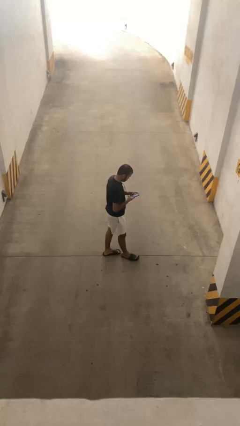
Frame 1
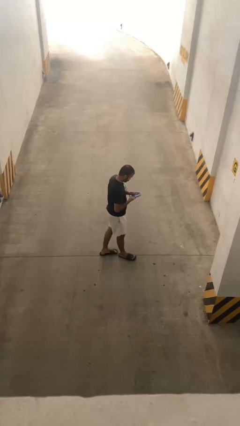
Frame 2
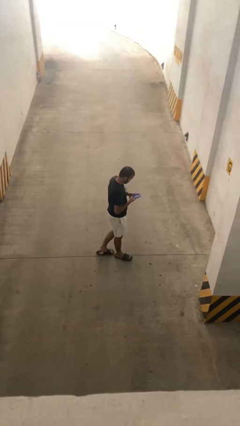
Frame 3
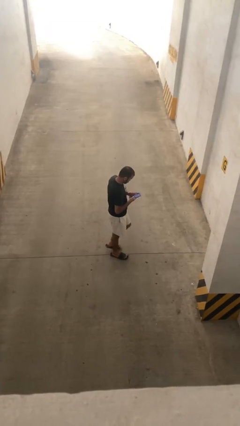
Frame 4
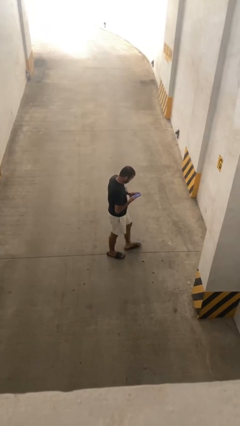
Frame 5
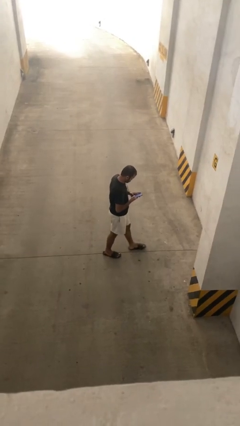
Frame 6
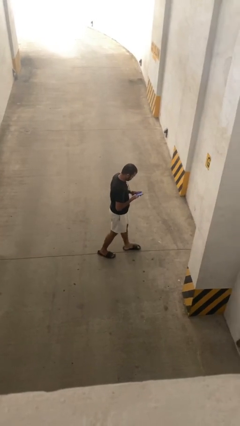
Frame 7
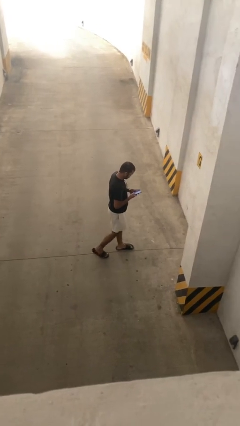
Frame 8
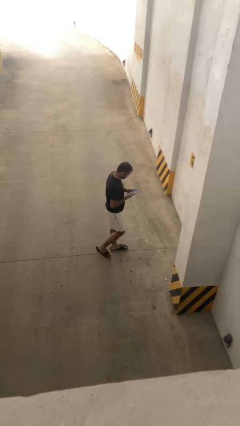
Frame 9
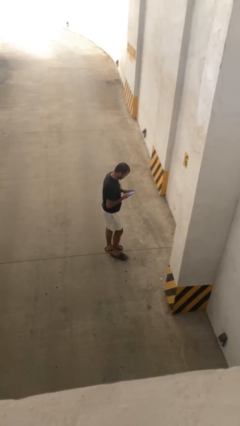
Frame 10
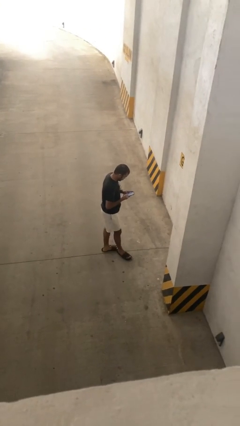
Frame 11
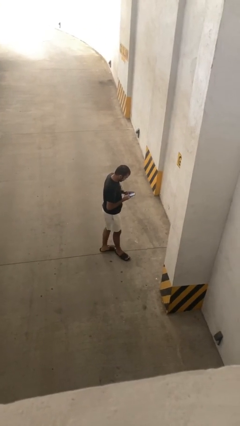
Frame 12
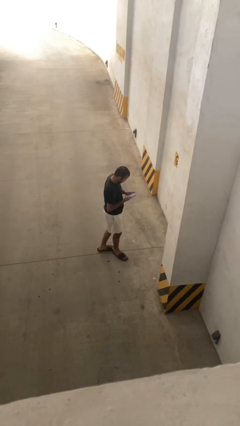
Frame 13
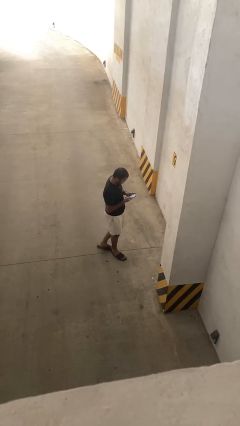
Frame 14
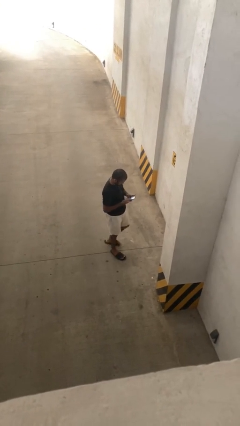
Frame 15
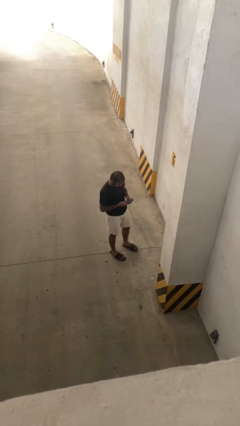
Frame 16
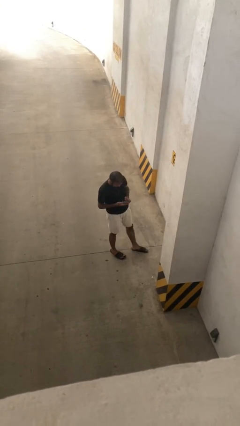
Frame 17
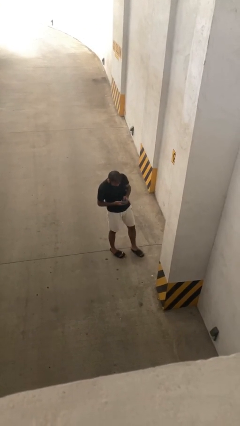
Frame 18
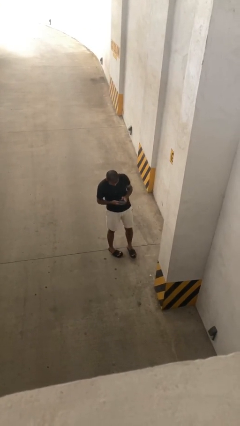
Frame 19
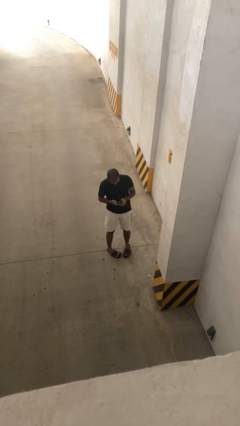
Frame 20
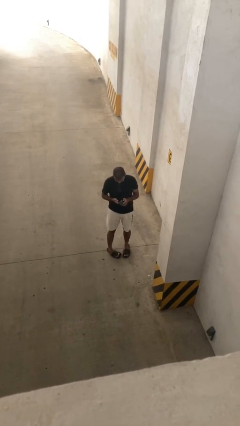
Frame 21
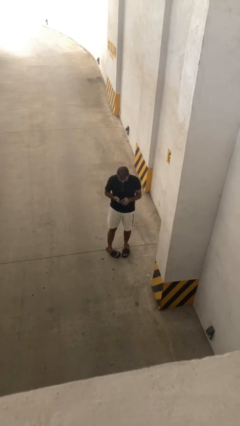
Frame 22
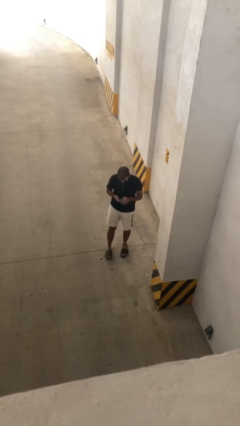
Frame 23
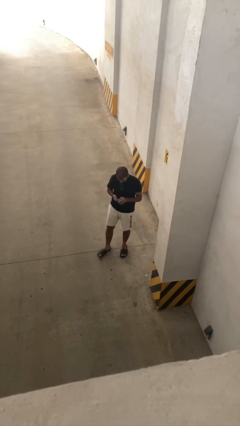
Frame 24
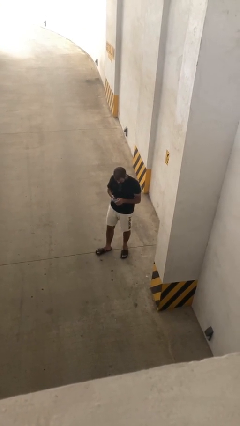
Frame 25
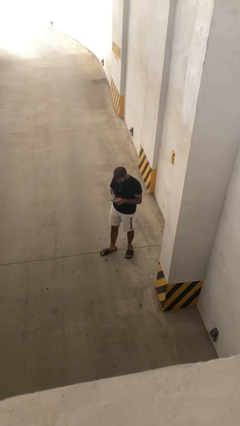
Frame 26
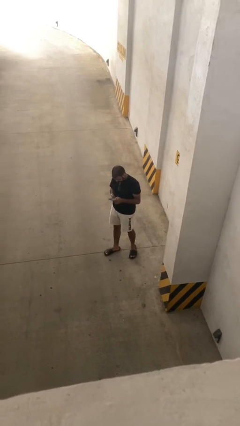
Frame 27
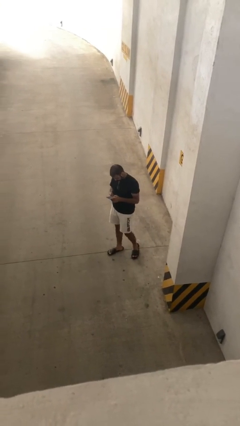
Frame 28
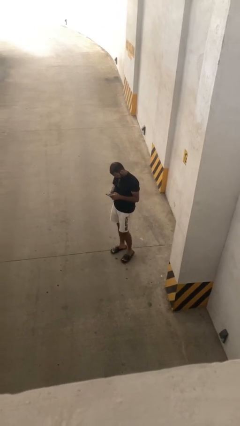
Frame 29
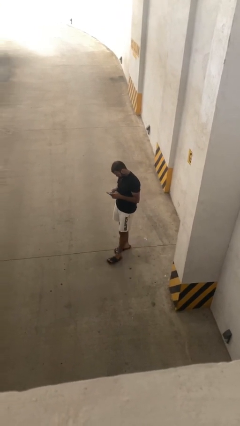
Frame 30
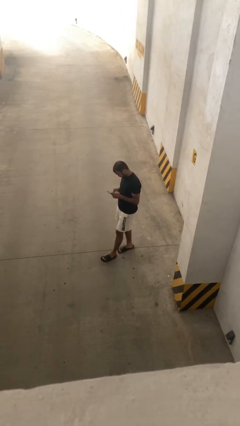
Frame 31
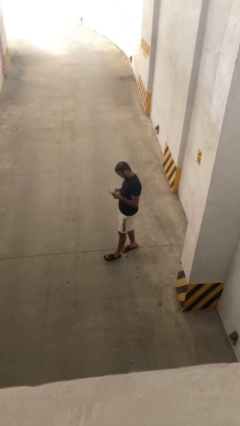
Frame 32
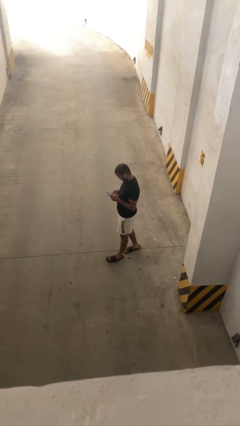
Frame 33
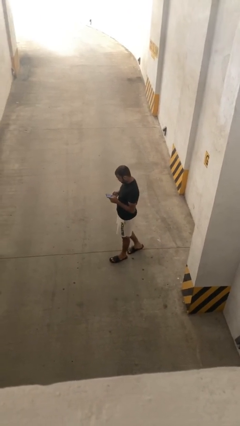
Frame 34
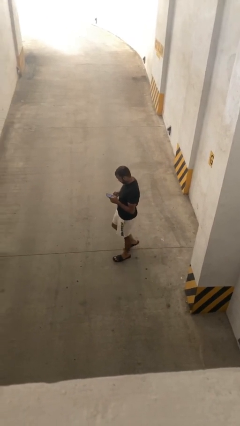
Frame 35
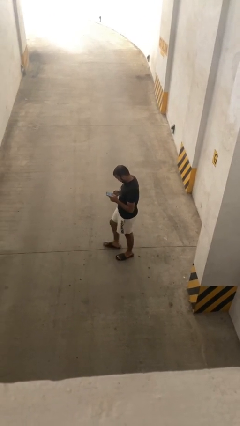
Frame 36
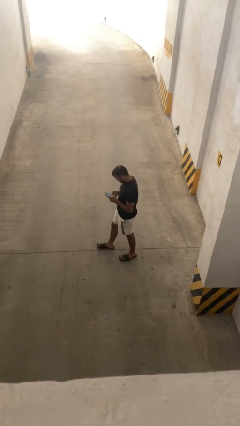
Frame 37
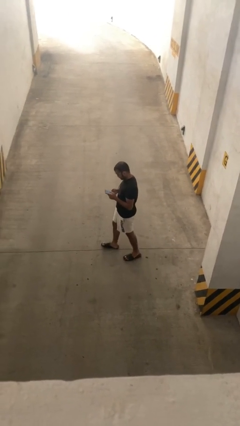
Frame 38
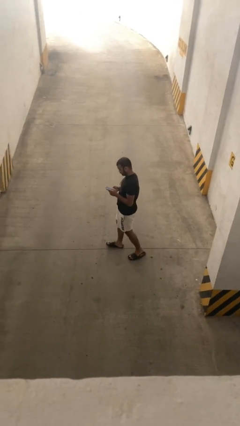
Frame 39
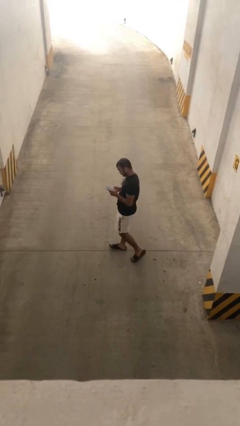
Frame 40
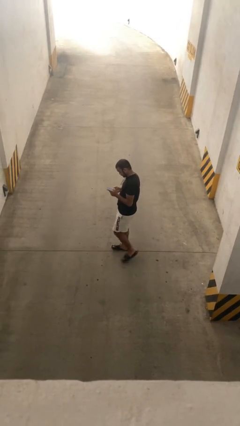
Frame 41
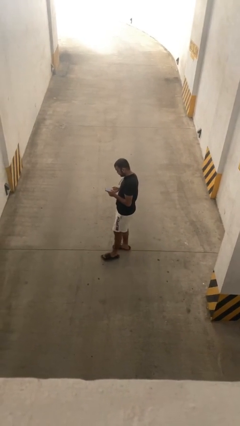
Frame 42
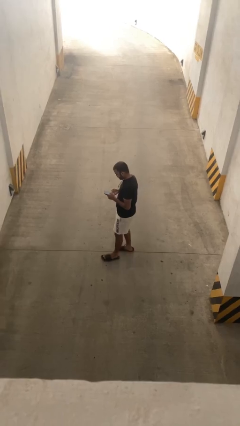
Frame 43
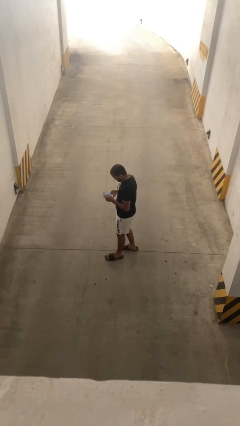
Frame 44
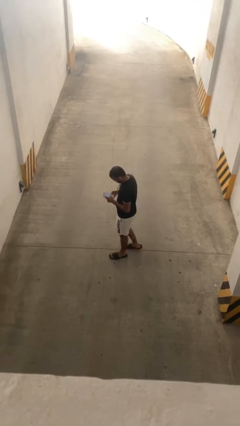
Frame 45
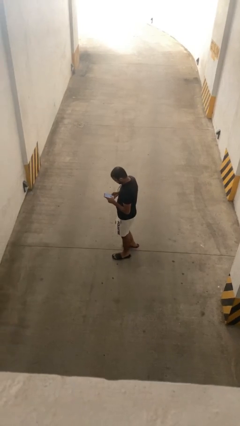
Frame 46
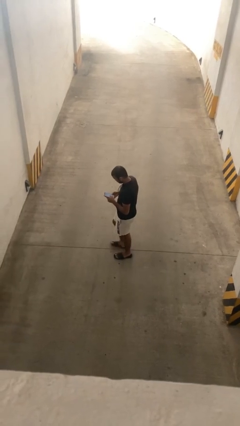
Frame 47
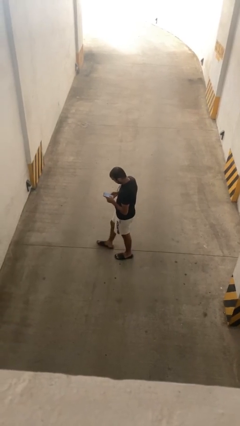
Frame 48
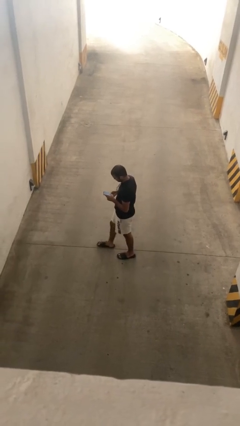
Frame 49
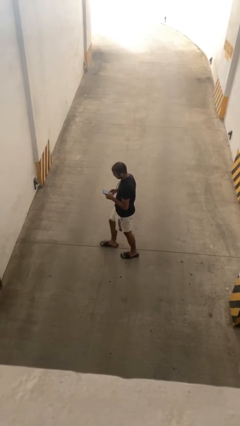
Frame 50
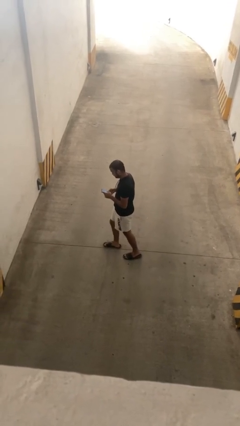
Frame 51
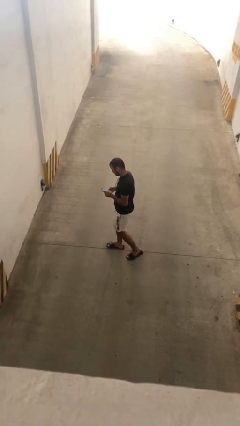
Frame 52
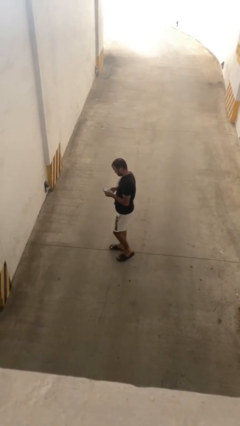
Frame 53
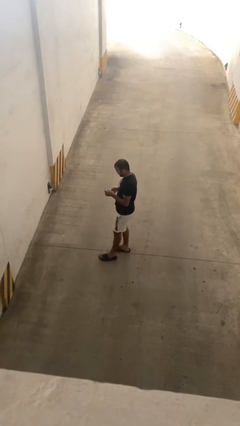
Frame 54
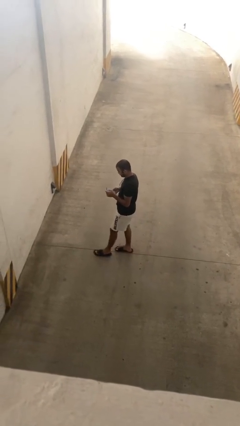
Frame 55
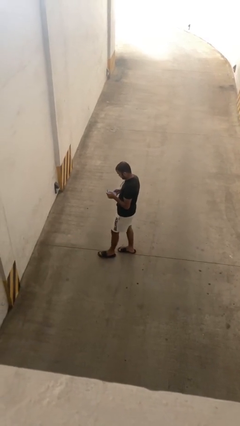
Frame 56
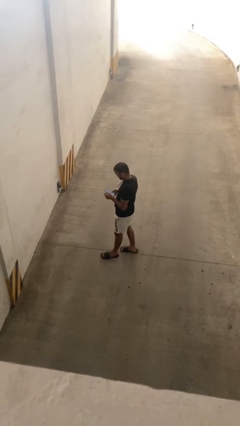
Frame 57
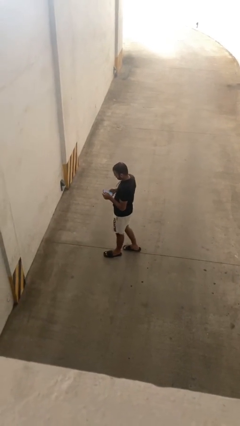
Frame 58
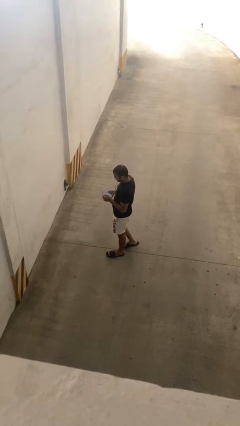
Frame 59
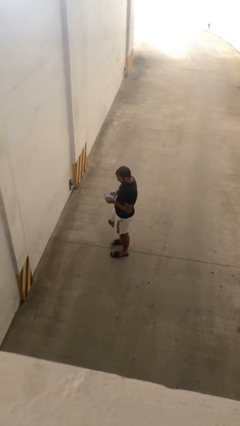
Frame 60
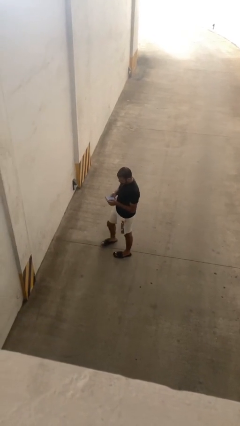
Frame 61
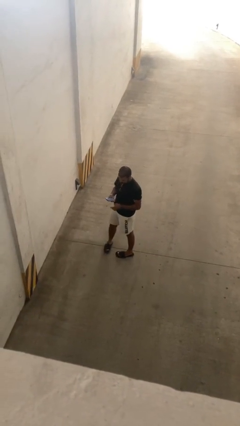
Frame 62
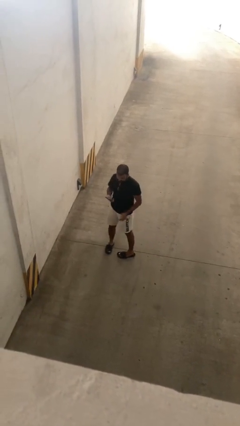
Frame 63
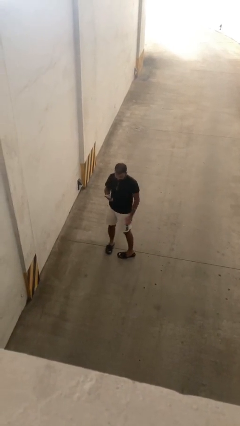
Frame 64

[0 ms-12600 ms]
person texts on phone

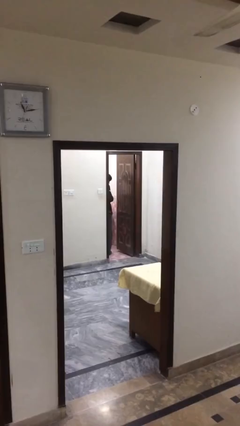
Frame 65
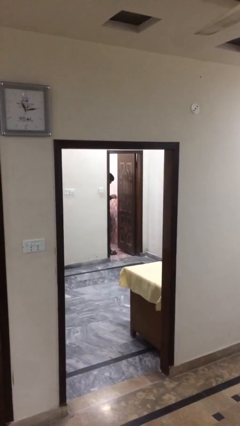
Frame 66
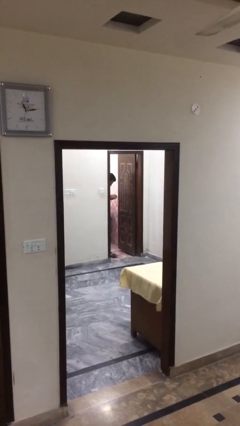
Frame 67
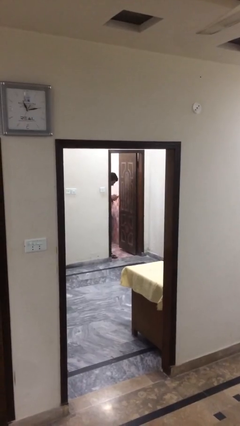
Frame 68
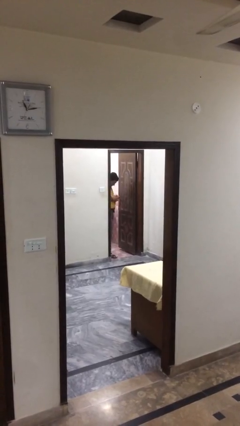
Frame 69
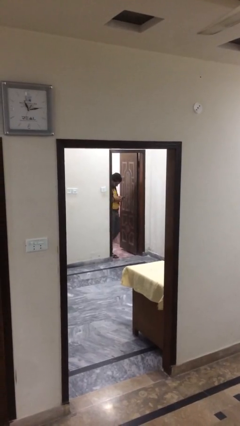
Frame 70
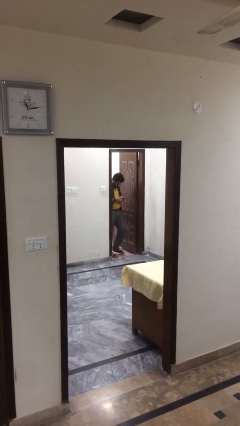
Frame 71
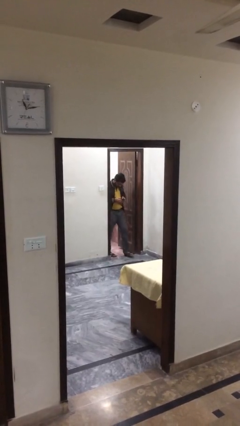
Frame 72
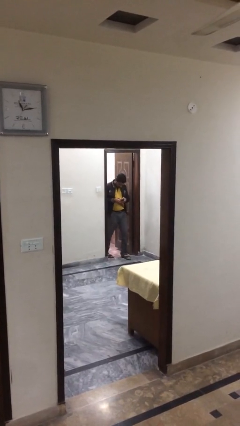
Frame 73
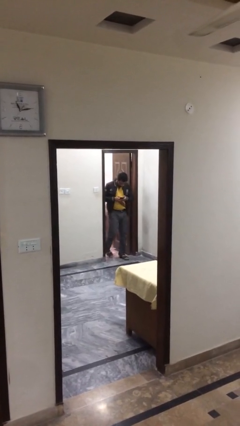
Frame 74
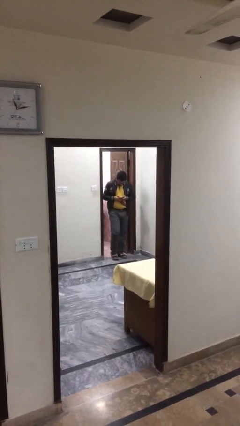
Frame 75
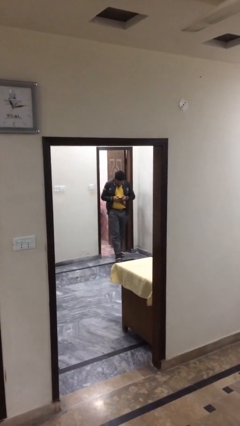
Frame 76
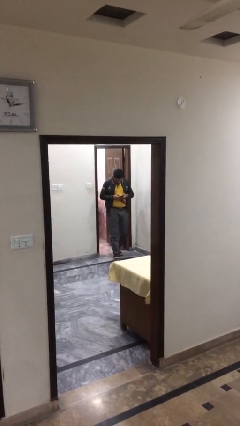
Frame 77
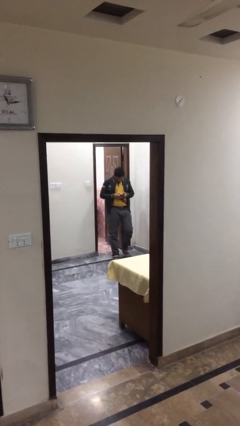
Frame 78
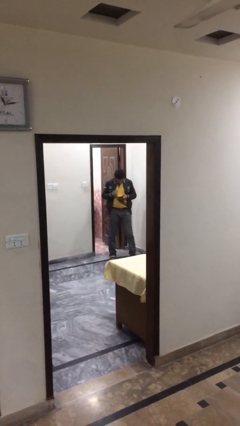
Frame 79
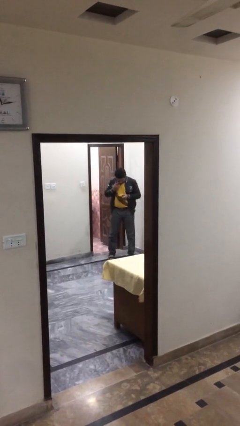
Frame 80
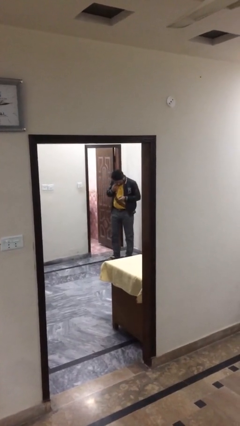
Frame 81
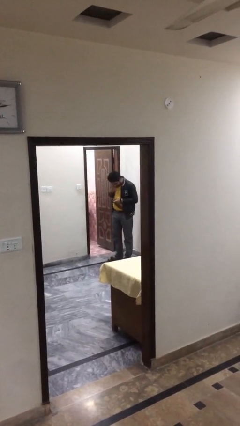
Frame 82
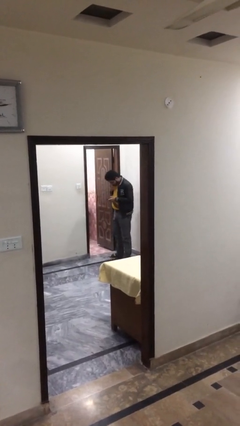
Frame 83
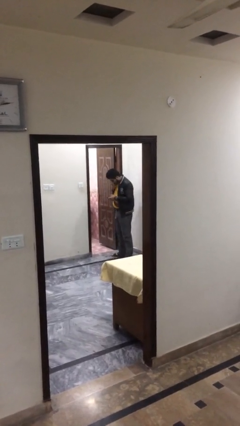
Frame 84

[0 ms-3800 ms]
person exits scene through structure

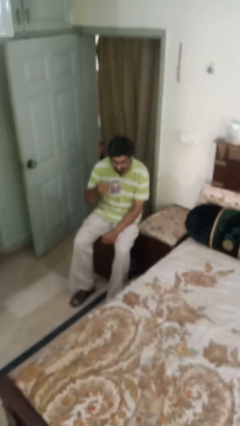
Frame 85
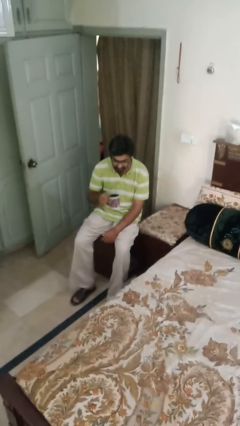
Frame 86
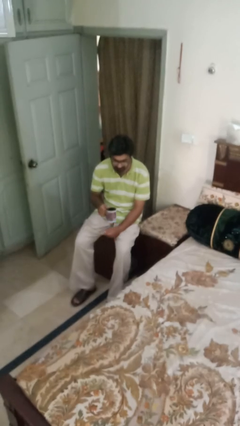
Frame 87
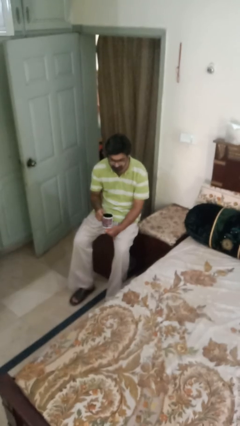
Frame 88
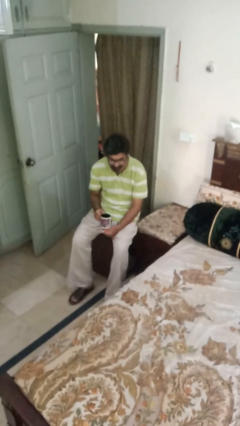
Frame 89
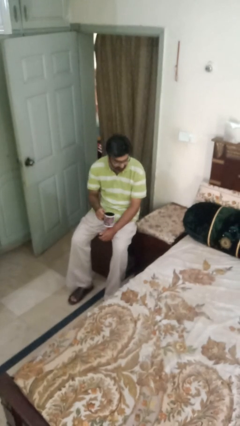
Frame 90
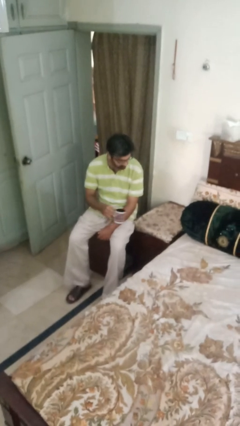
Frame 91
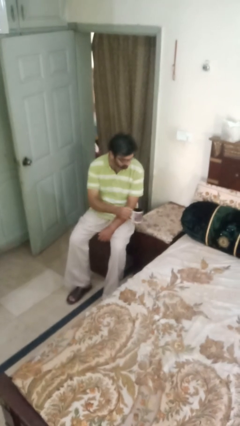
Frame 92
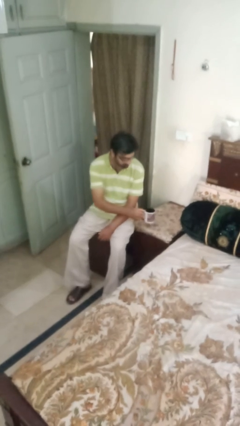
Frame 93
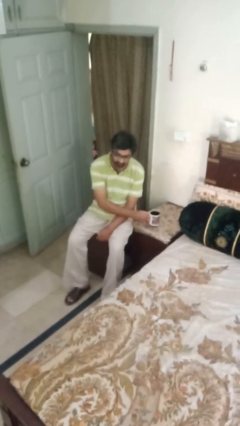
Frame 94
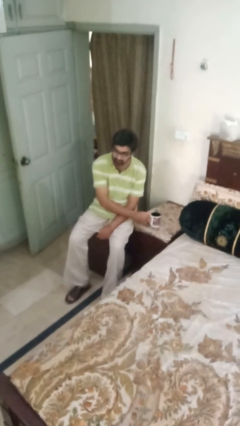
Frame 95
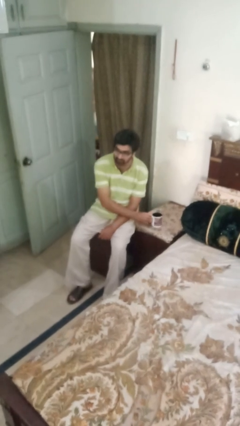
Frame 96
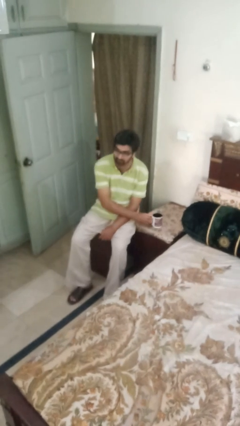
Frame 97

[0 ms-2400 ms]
person puts down object on table
